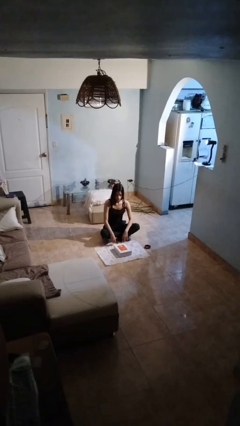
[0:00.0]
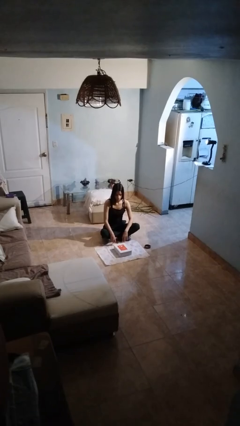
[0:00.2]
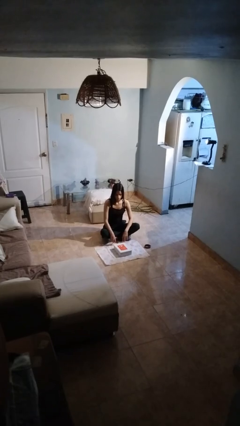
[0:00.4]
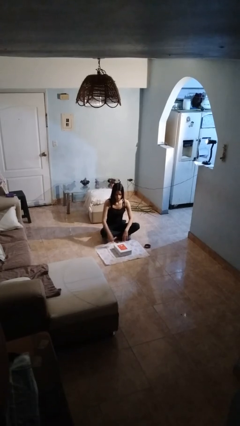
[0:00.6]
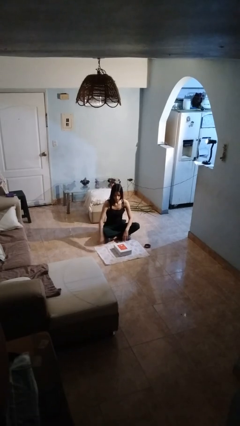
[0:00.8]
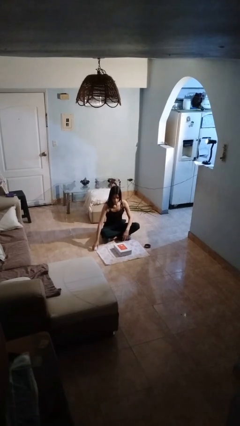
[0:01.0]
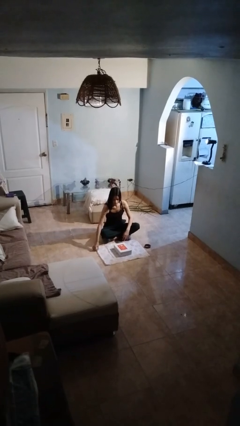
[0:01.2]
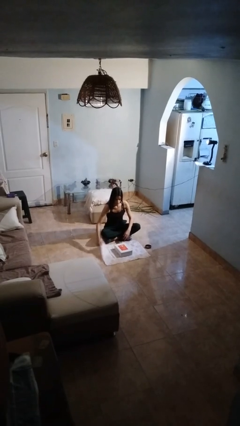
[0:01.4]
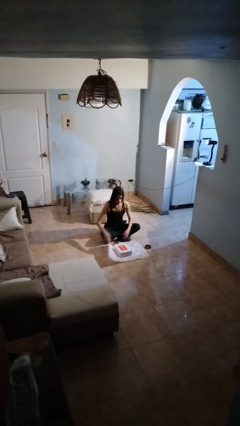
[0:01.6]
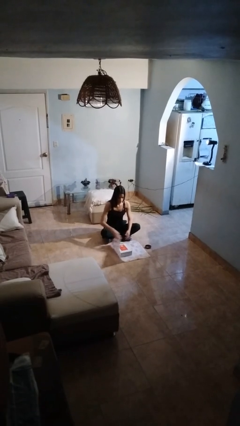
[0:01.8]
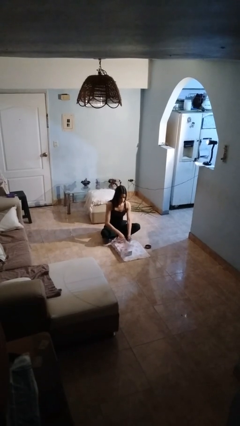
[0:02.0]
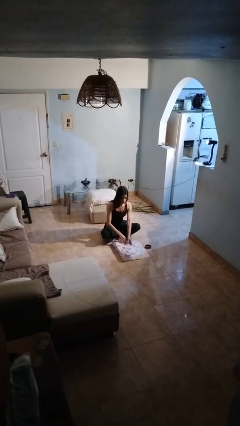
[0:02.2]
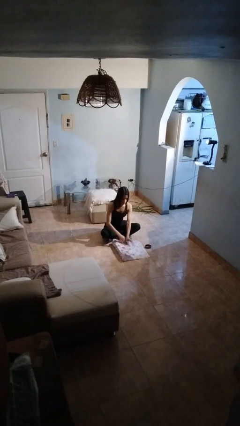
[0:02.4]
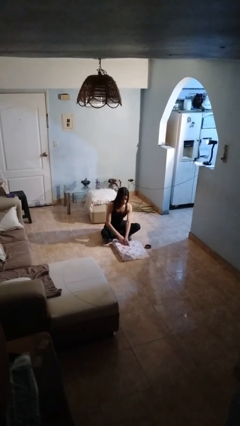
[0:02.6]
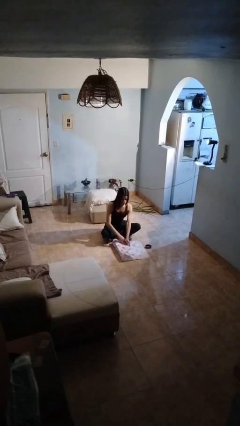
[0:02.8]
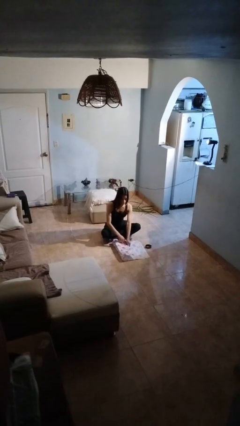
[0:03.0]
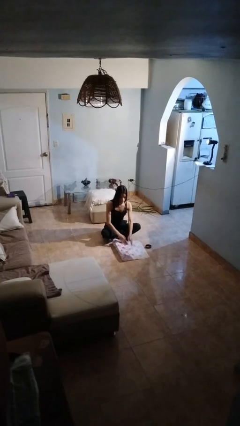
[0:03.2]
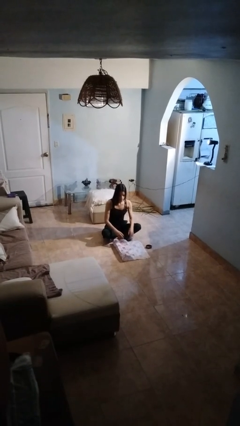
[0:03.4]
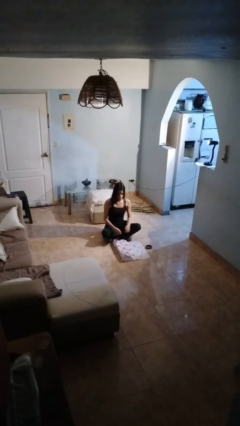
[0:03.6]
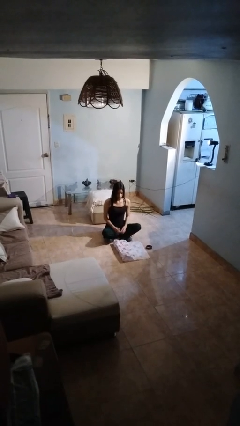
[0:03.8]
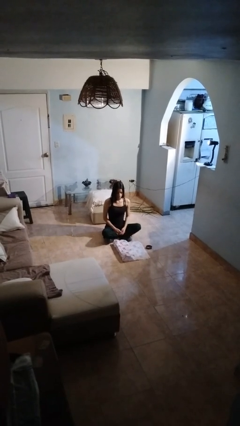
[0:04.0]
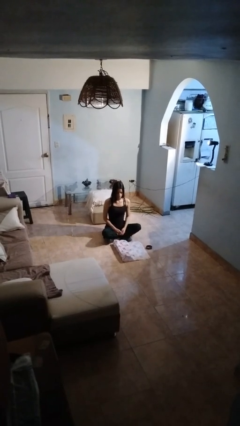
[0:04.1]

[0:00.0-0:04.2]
person wraps box

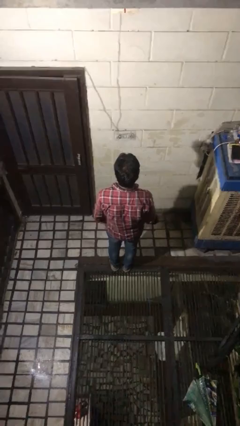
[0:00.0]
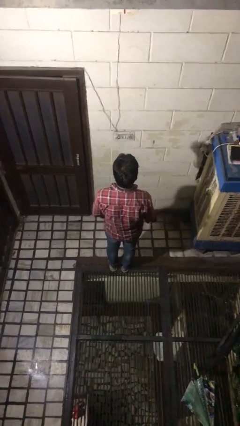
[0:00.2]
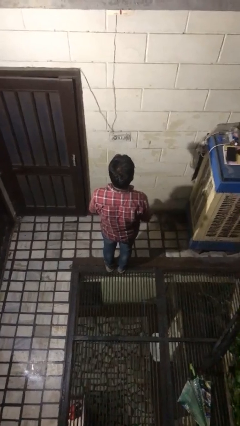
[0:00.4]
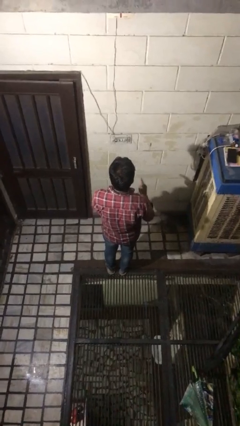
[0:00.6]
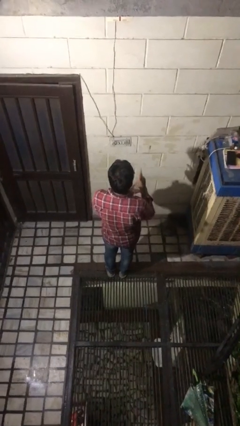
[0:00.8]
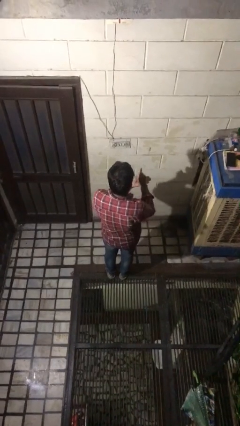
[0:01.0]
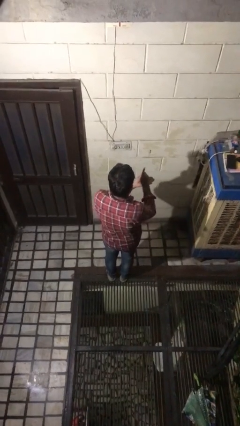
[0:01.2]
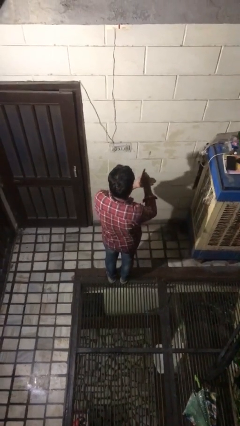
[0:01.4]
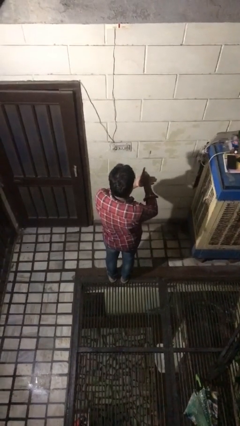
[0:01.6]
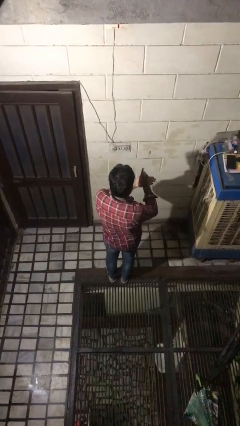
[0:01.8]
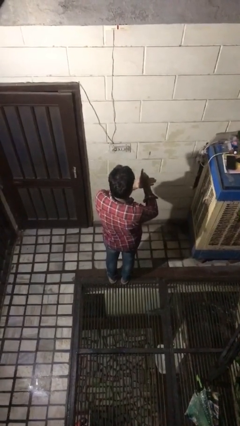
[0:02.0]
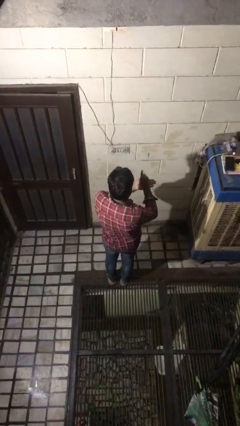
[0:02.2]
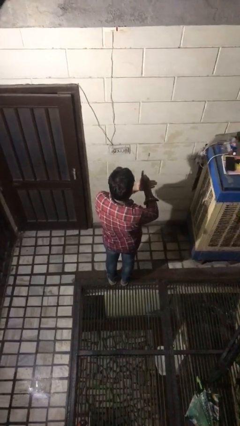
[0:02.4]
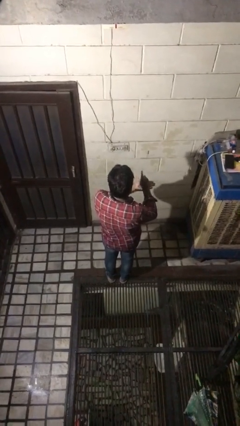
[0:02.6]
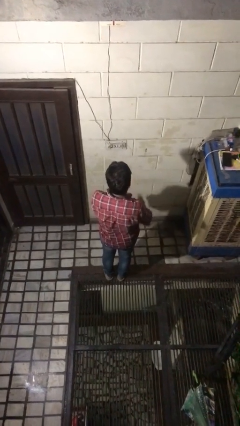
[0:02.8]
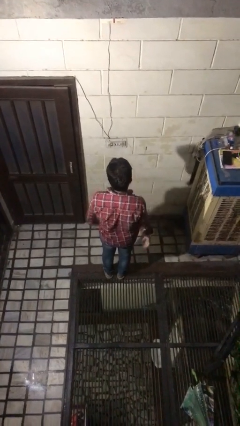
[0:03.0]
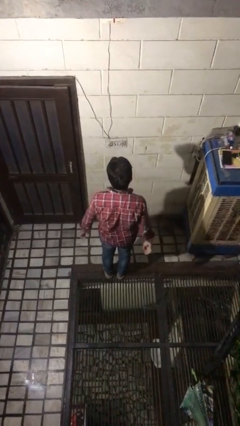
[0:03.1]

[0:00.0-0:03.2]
person gestures number one

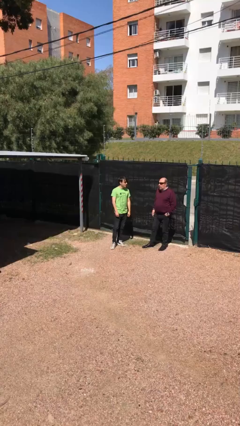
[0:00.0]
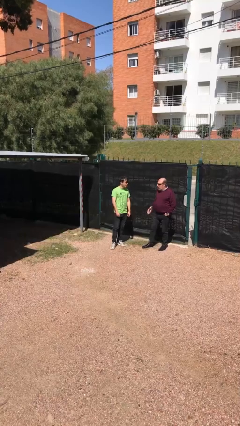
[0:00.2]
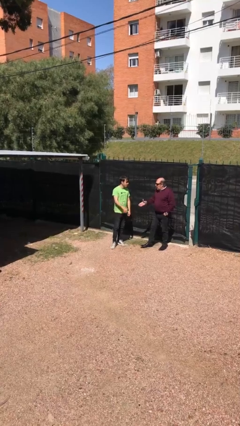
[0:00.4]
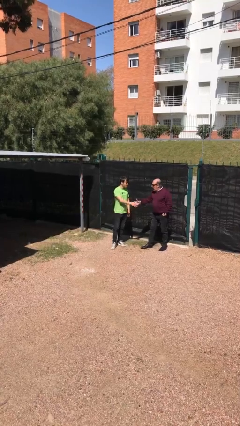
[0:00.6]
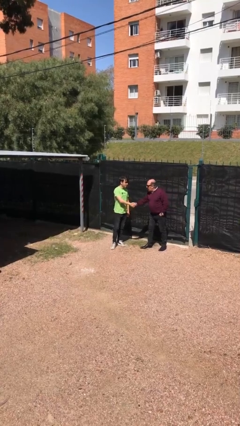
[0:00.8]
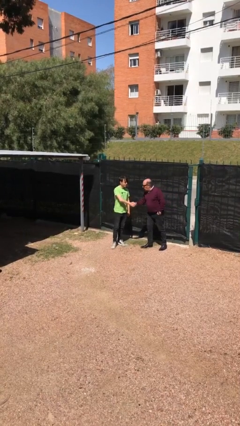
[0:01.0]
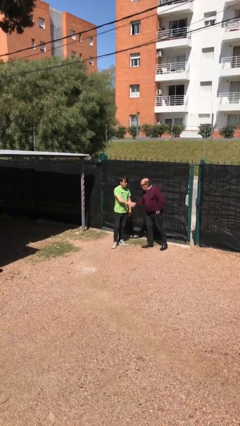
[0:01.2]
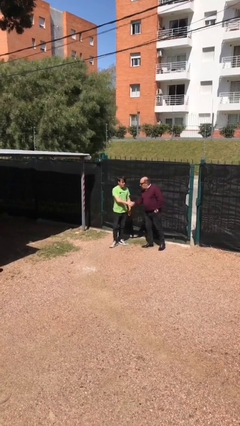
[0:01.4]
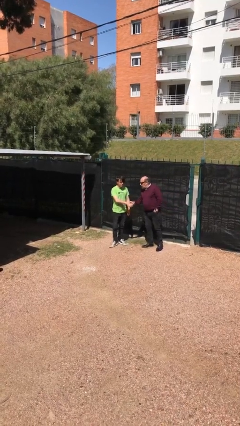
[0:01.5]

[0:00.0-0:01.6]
person shakes hand

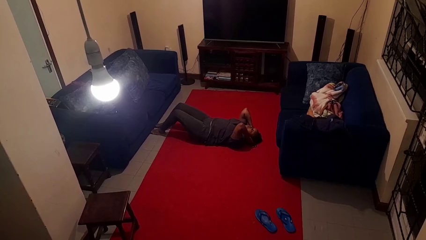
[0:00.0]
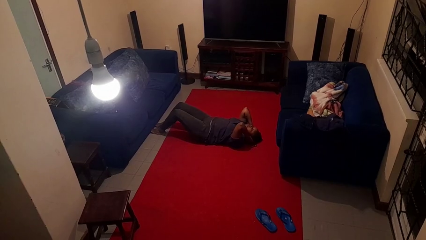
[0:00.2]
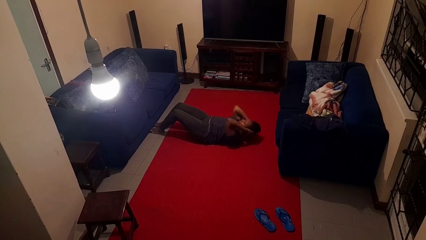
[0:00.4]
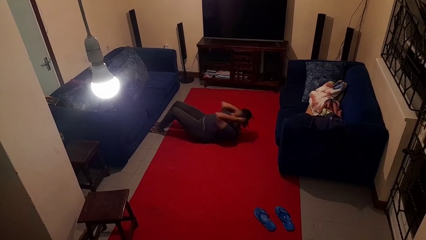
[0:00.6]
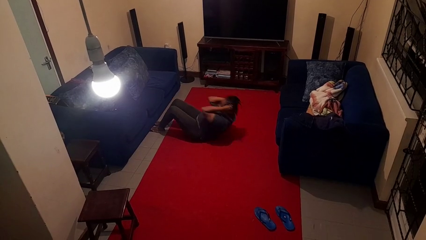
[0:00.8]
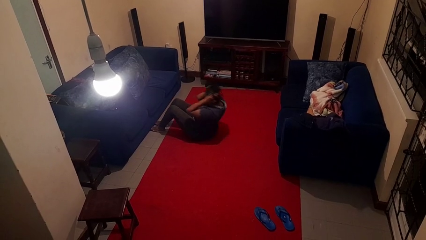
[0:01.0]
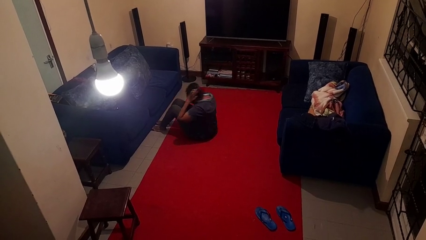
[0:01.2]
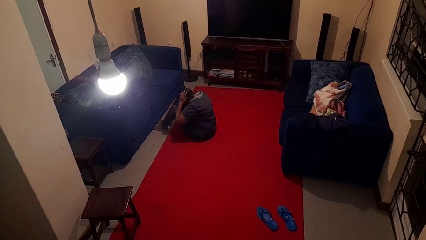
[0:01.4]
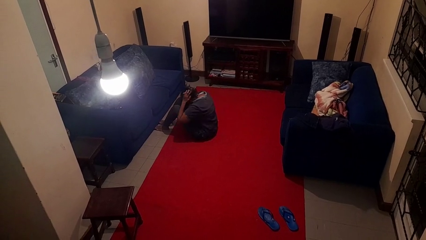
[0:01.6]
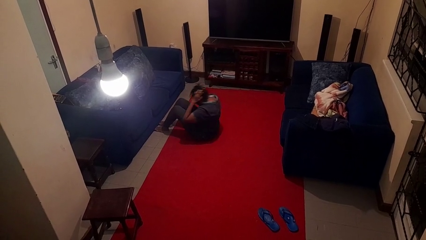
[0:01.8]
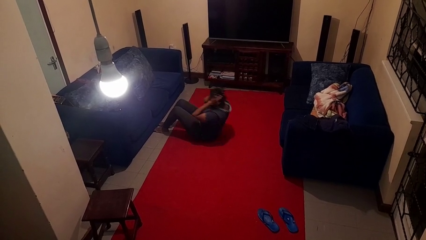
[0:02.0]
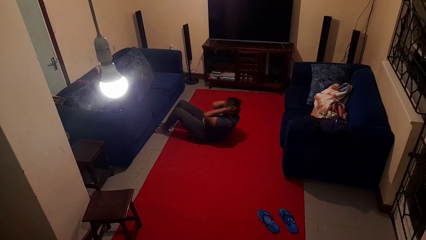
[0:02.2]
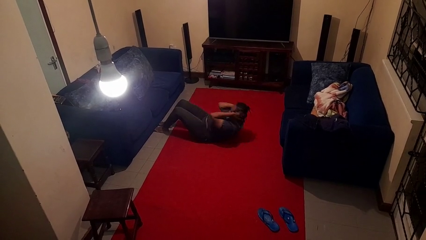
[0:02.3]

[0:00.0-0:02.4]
person exercises with situp

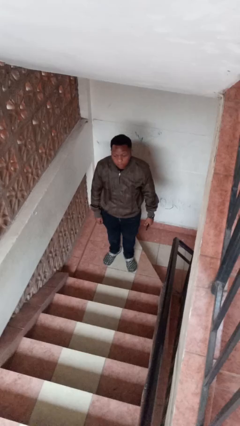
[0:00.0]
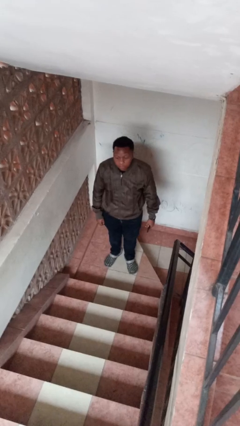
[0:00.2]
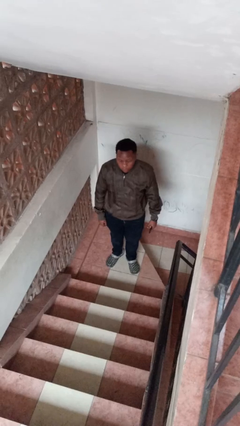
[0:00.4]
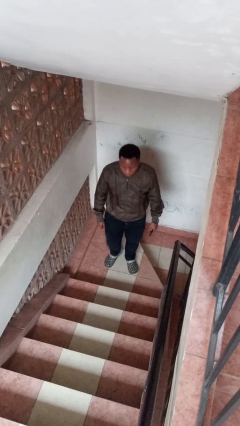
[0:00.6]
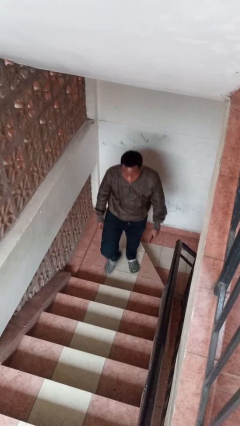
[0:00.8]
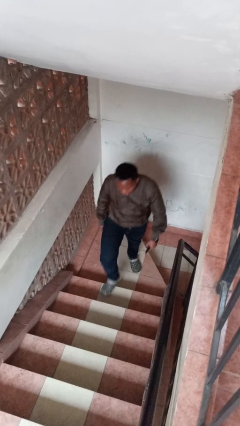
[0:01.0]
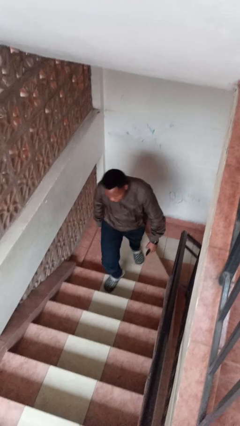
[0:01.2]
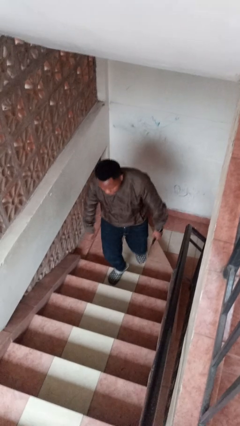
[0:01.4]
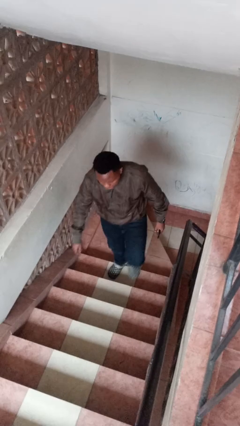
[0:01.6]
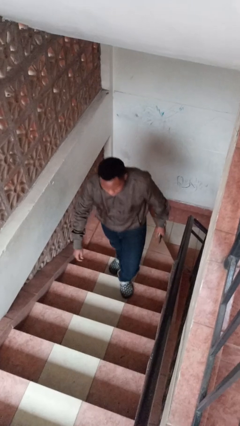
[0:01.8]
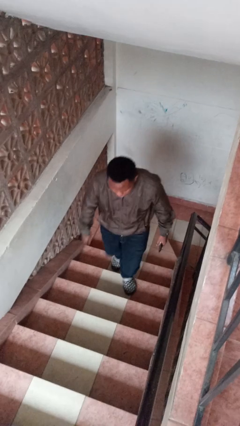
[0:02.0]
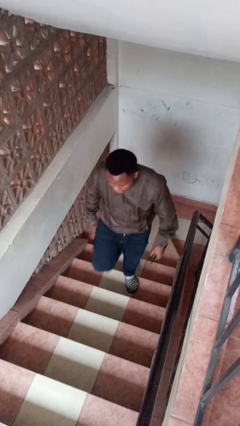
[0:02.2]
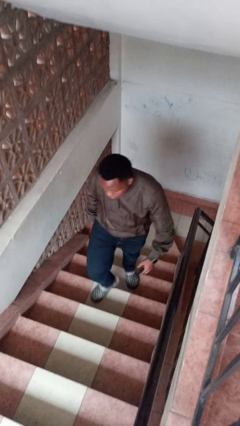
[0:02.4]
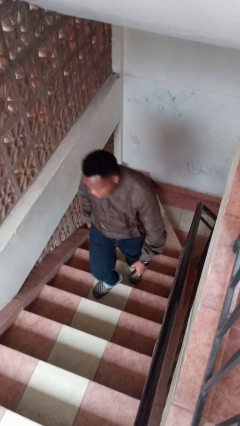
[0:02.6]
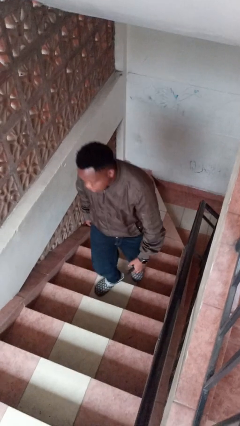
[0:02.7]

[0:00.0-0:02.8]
person climbs up stairs

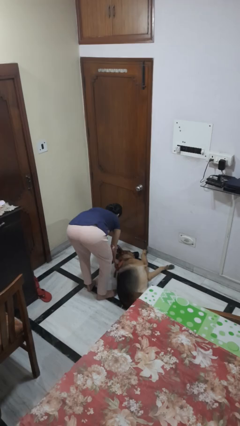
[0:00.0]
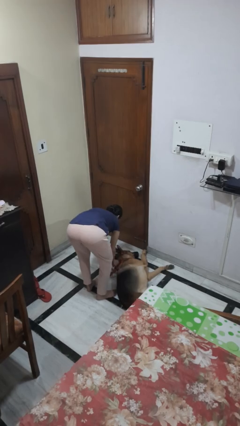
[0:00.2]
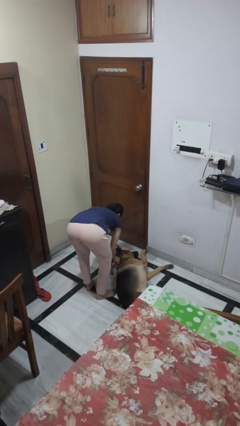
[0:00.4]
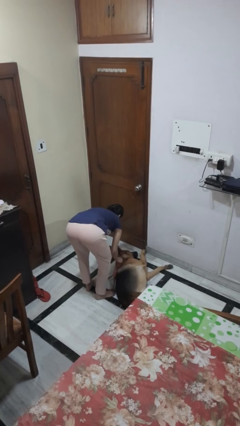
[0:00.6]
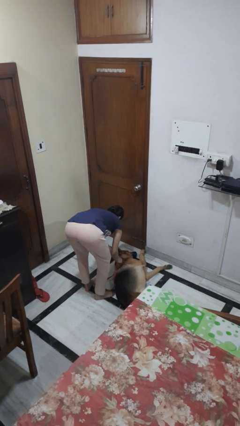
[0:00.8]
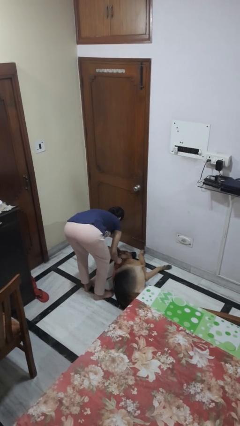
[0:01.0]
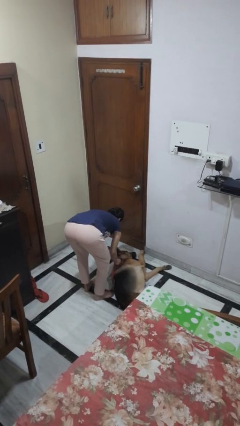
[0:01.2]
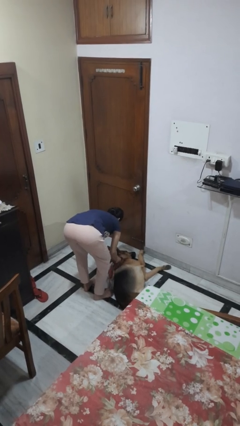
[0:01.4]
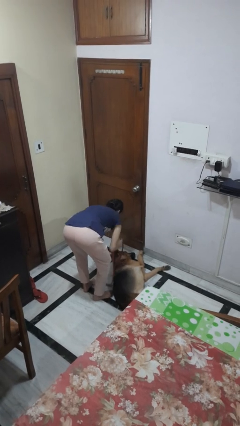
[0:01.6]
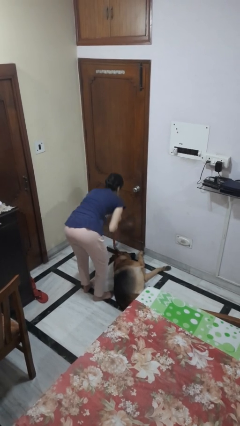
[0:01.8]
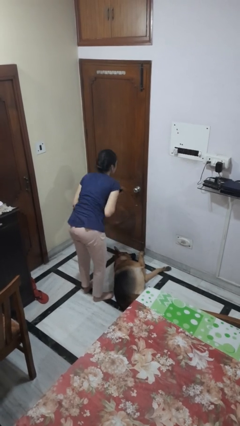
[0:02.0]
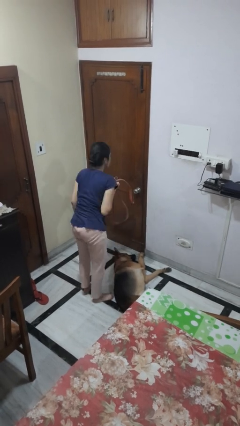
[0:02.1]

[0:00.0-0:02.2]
person unattaches leash from dog

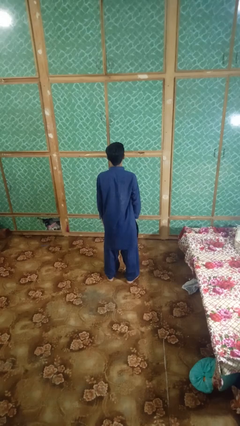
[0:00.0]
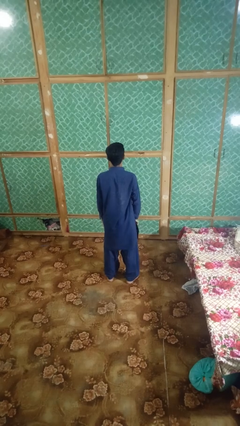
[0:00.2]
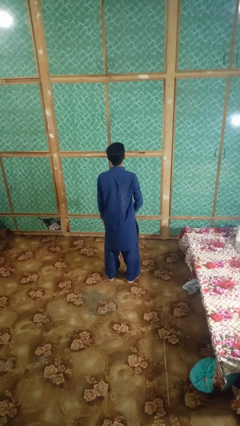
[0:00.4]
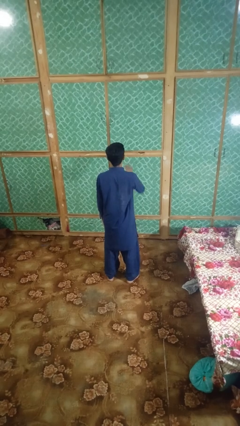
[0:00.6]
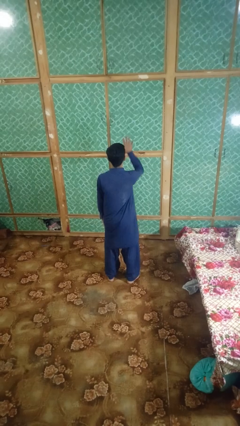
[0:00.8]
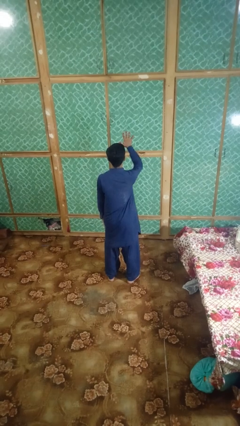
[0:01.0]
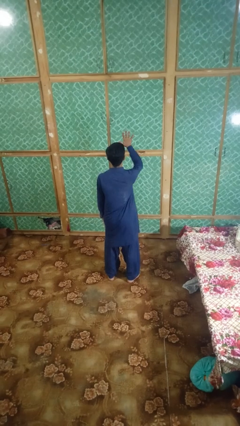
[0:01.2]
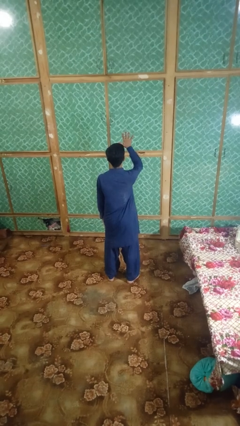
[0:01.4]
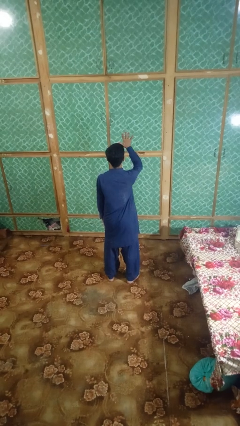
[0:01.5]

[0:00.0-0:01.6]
person gestures number five
